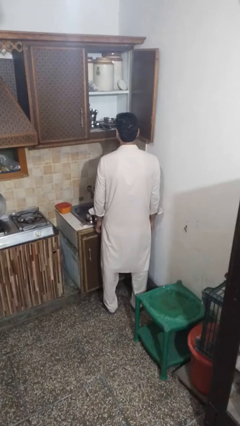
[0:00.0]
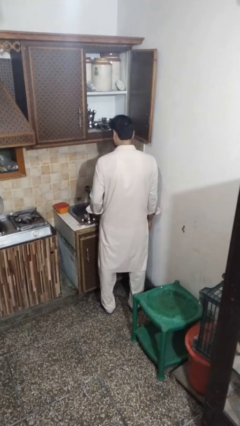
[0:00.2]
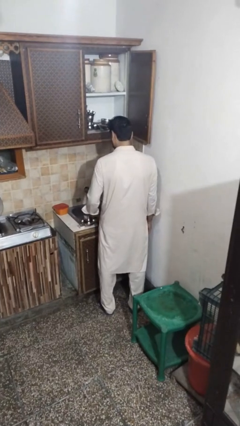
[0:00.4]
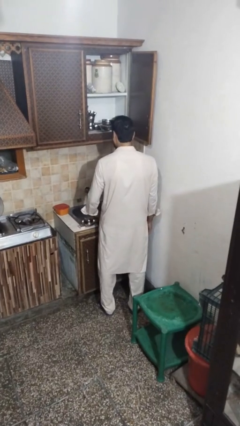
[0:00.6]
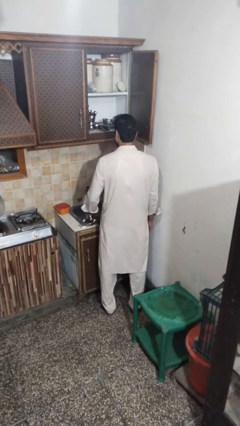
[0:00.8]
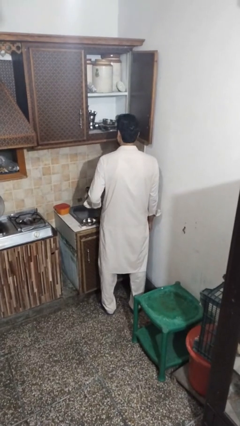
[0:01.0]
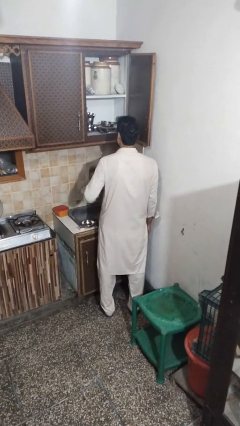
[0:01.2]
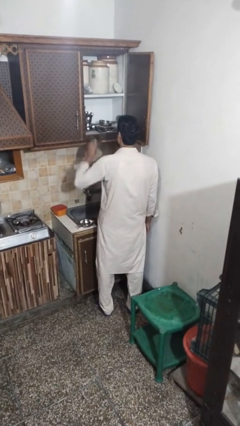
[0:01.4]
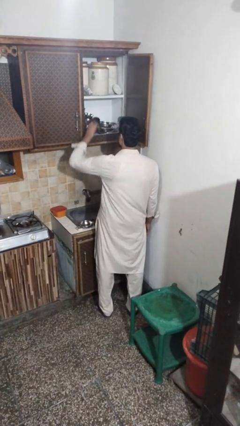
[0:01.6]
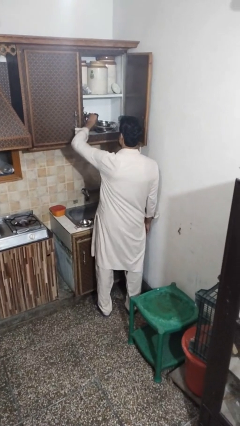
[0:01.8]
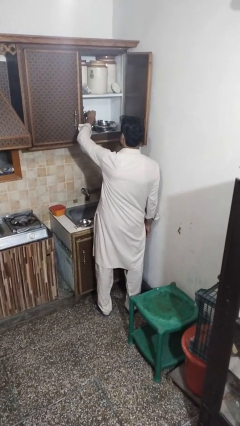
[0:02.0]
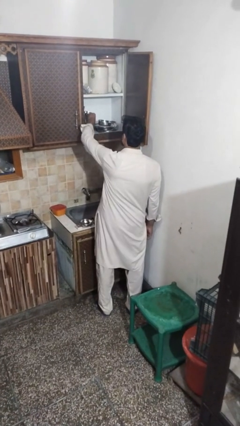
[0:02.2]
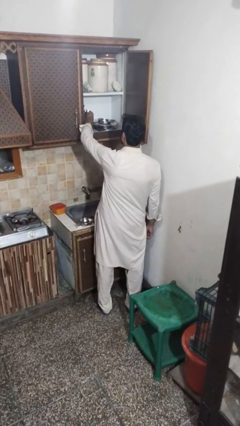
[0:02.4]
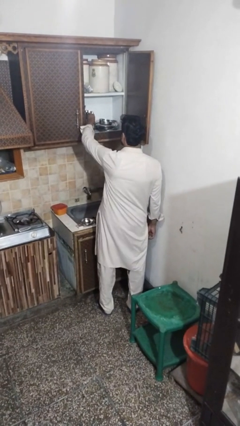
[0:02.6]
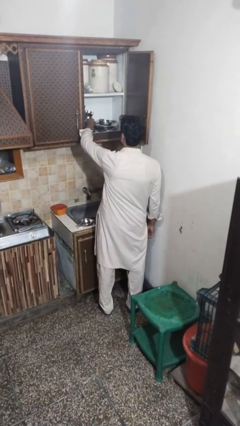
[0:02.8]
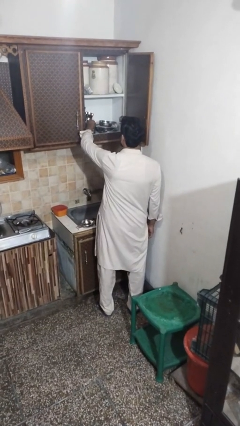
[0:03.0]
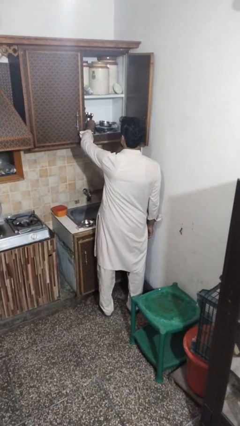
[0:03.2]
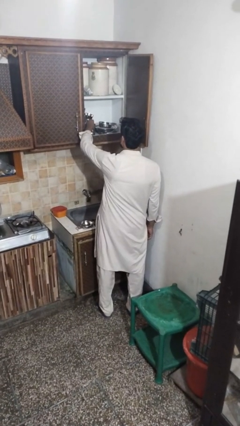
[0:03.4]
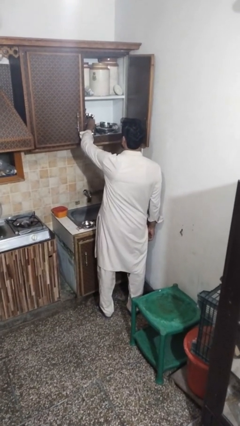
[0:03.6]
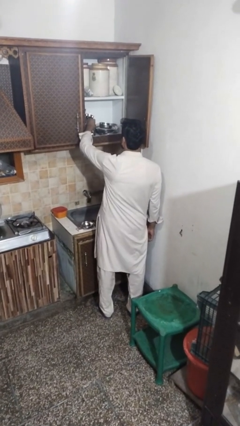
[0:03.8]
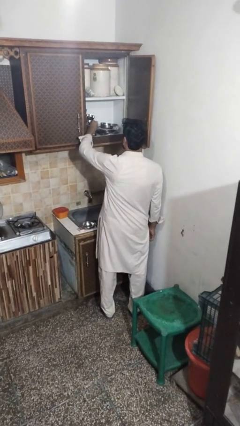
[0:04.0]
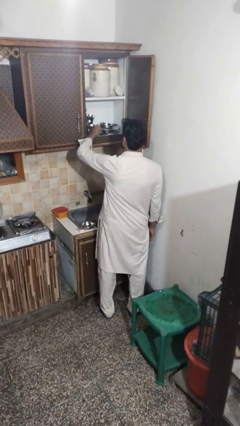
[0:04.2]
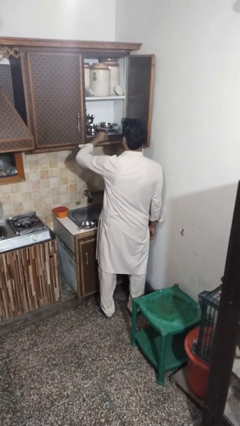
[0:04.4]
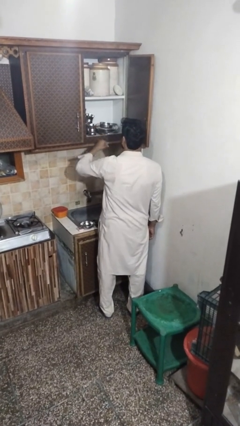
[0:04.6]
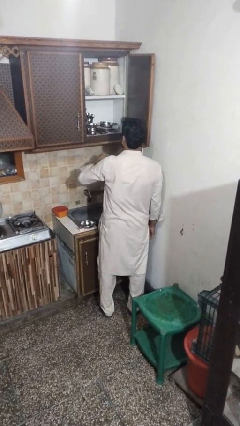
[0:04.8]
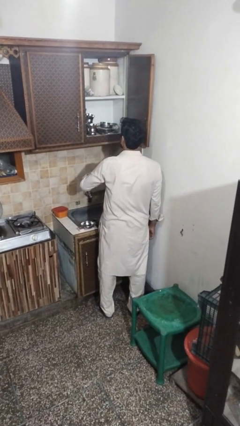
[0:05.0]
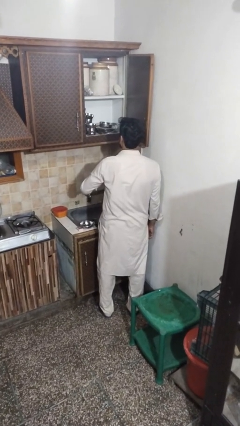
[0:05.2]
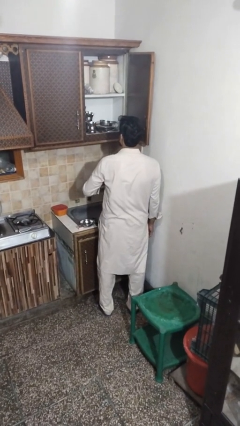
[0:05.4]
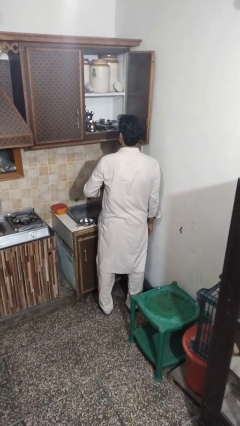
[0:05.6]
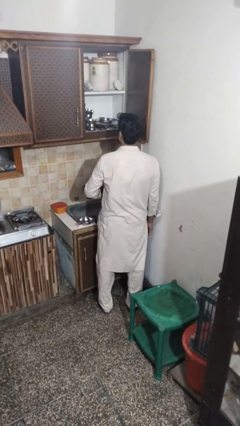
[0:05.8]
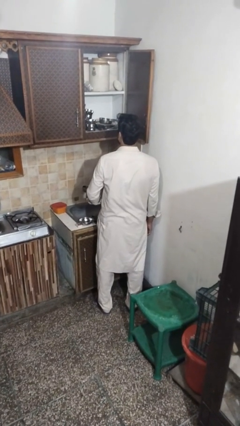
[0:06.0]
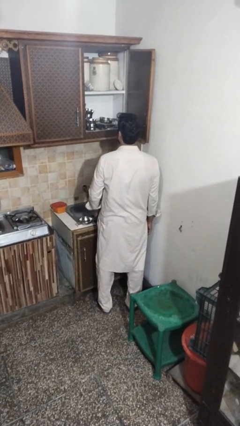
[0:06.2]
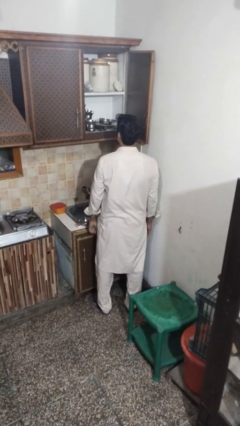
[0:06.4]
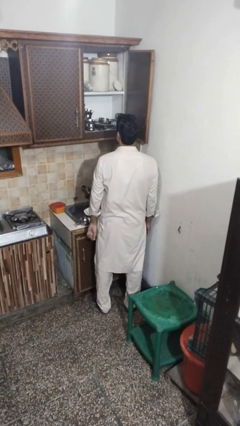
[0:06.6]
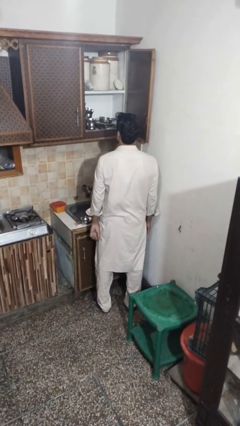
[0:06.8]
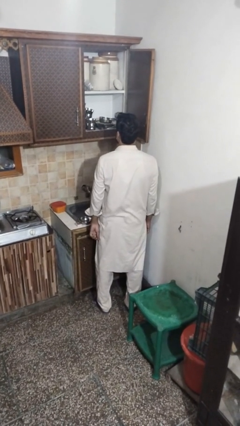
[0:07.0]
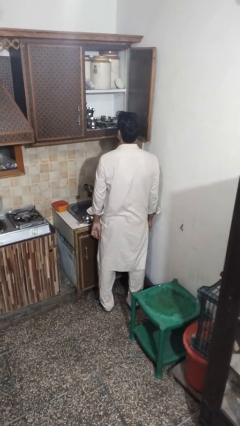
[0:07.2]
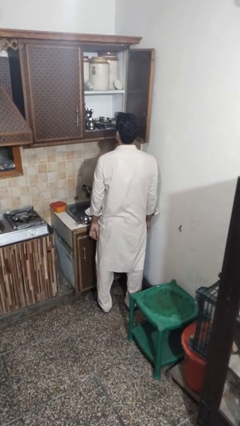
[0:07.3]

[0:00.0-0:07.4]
person puts object in cabinet

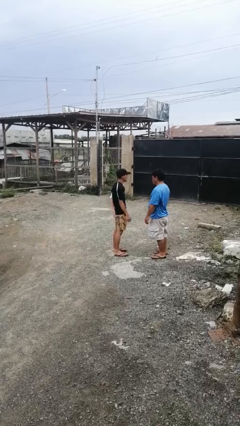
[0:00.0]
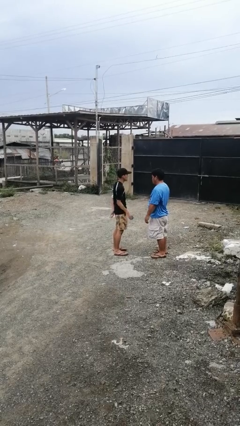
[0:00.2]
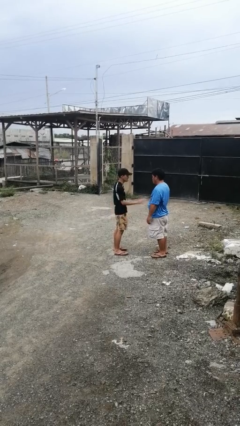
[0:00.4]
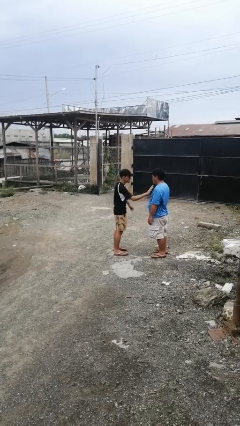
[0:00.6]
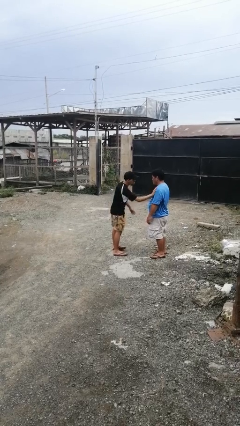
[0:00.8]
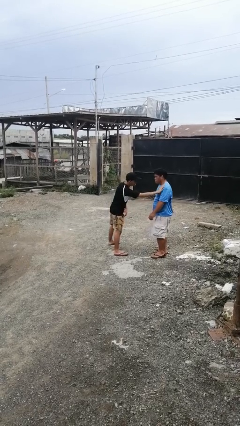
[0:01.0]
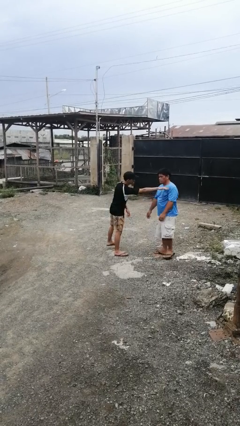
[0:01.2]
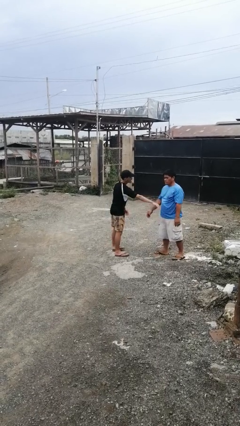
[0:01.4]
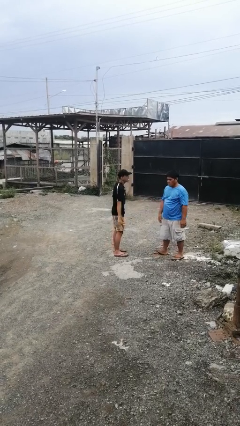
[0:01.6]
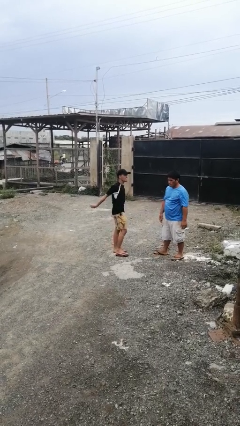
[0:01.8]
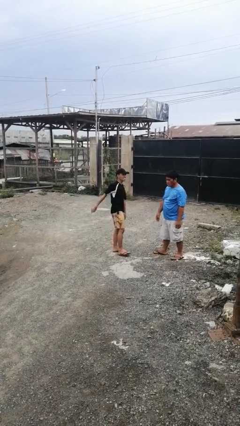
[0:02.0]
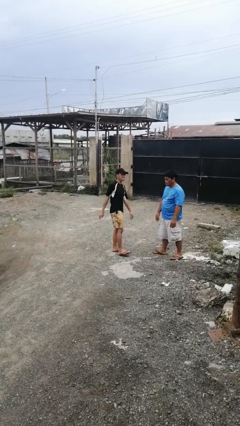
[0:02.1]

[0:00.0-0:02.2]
person shoves person

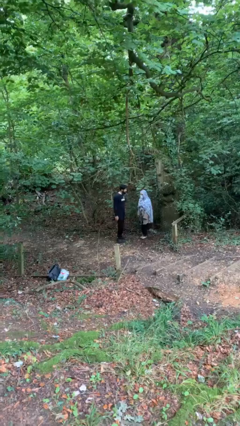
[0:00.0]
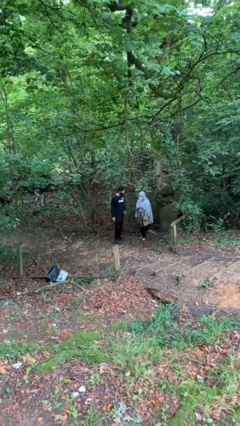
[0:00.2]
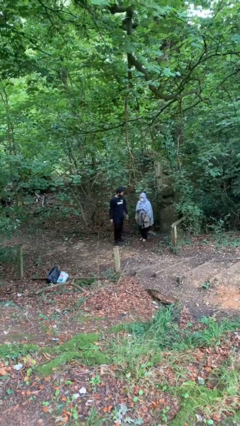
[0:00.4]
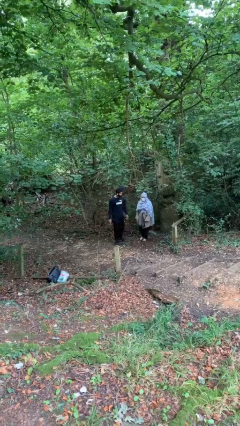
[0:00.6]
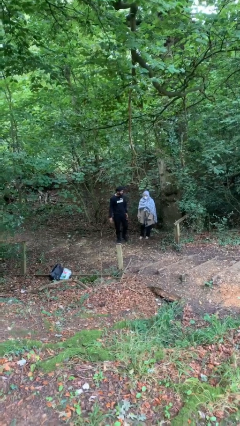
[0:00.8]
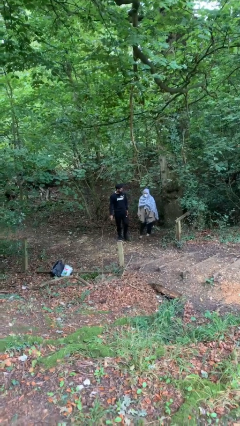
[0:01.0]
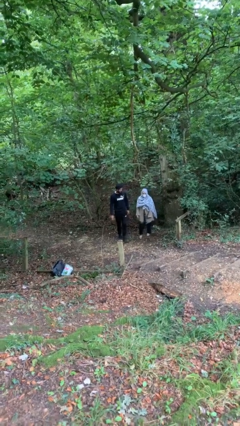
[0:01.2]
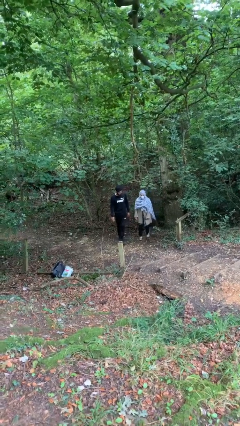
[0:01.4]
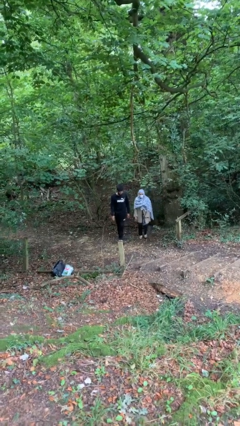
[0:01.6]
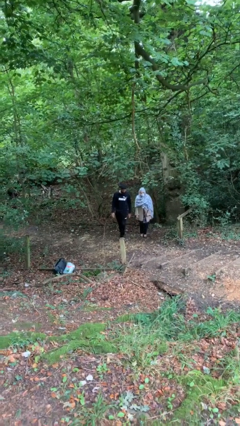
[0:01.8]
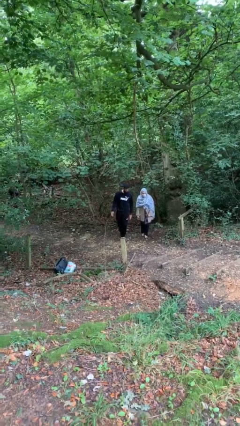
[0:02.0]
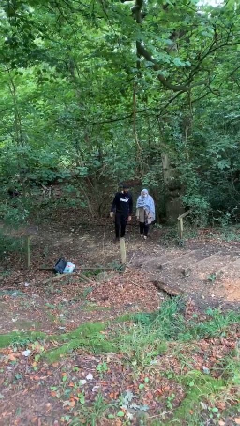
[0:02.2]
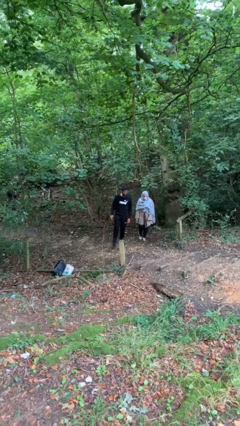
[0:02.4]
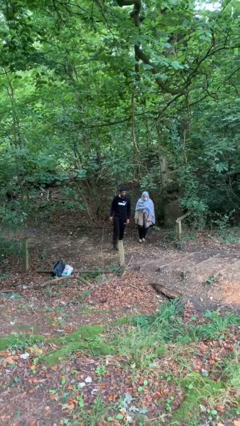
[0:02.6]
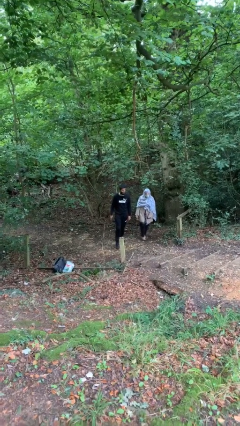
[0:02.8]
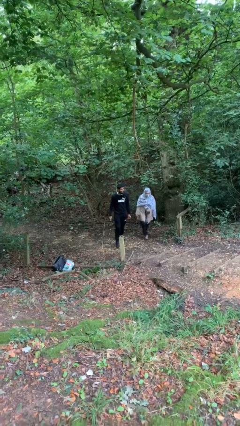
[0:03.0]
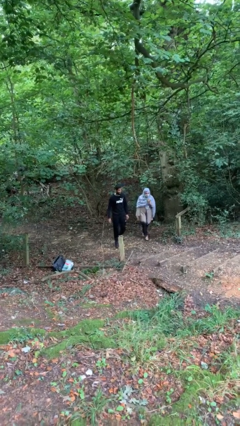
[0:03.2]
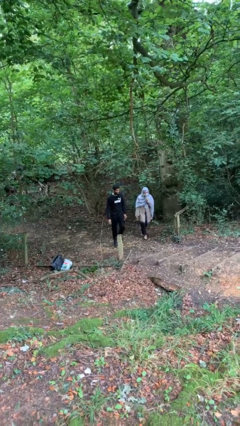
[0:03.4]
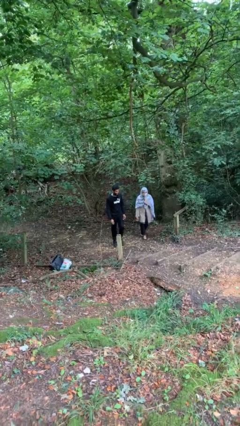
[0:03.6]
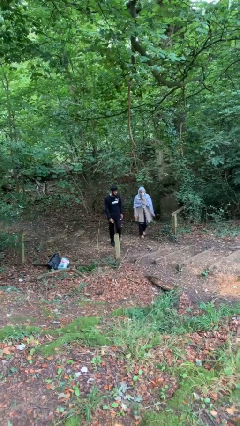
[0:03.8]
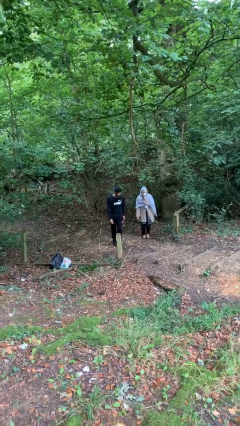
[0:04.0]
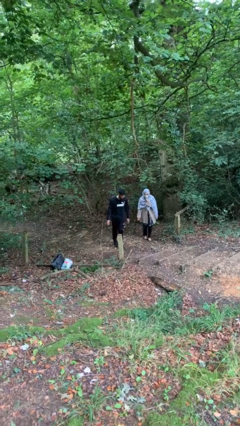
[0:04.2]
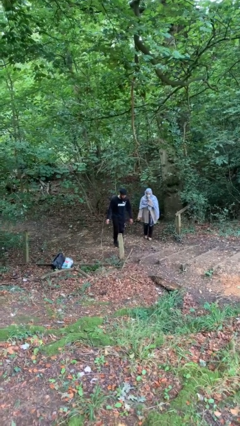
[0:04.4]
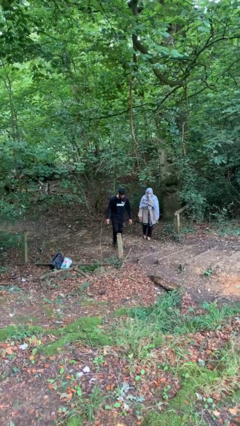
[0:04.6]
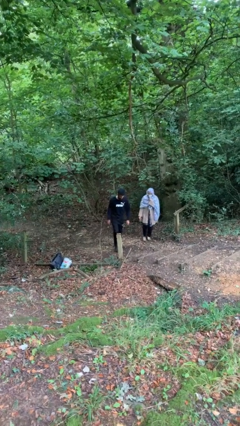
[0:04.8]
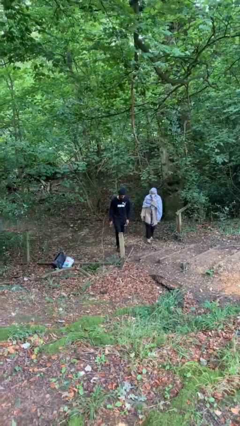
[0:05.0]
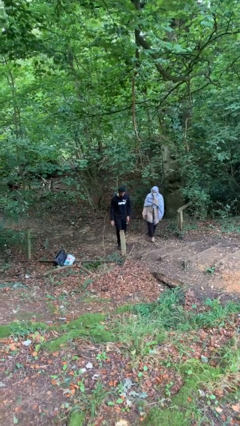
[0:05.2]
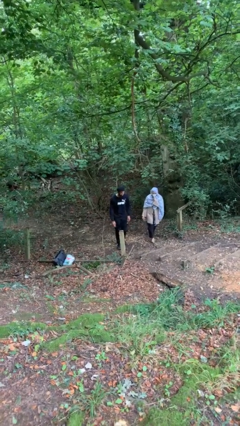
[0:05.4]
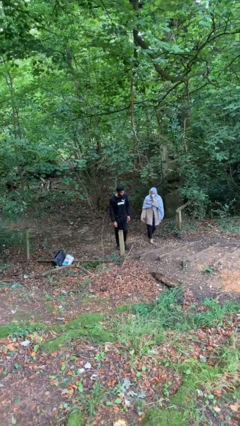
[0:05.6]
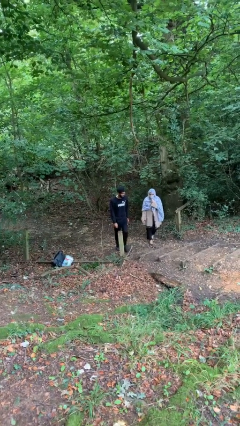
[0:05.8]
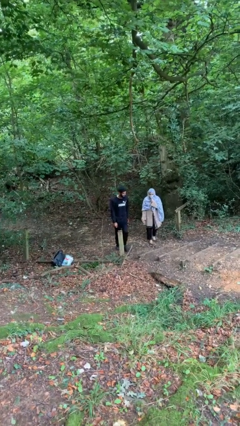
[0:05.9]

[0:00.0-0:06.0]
person talks to person

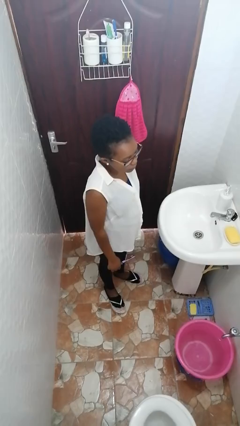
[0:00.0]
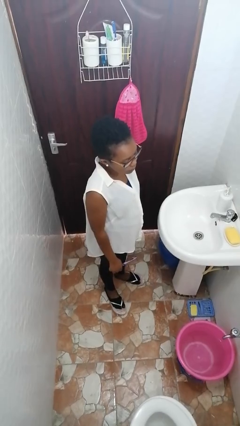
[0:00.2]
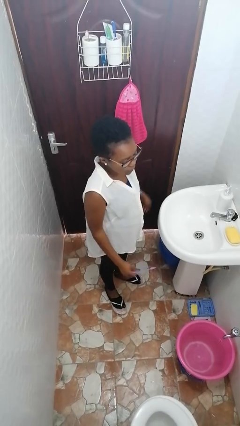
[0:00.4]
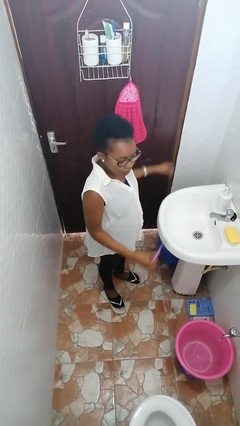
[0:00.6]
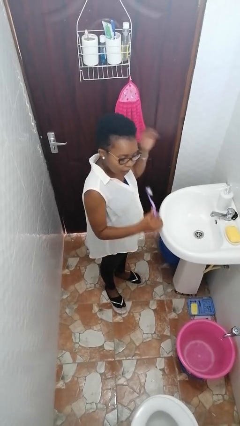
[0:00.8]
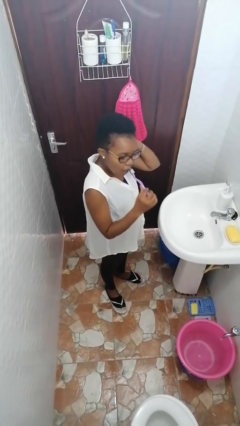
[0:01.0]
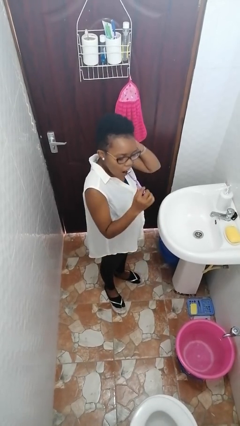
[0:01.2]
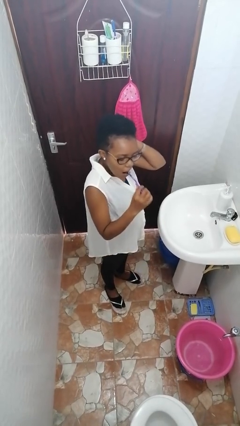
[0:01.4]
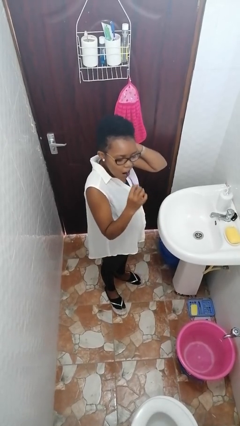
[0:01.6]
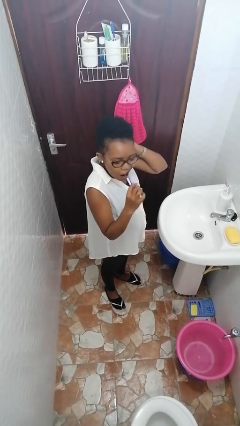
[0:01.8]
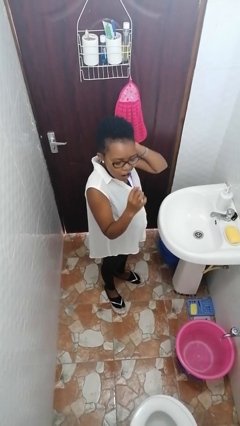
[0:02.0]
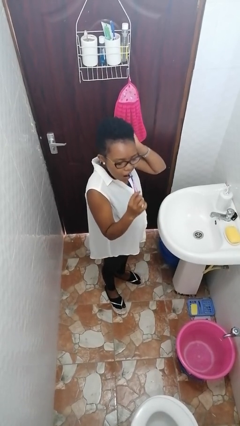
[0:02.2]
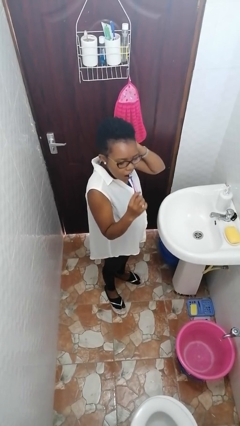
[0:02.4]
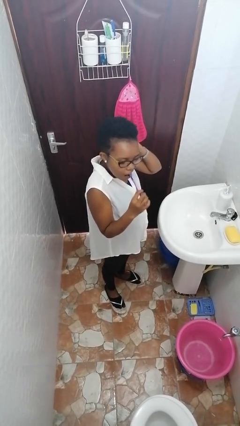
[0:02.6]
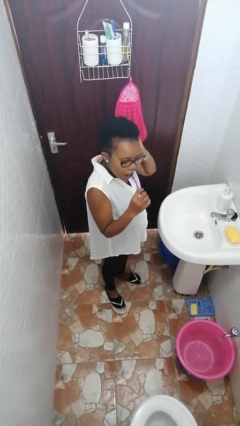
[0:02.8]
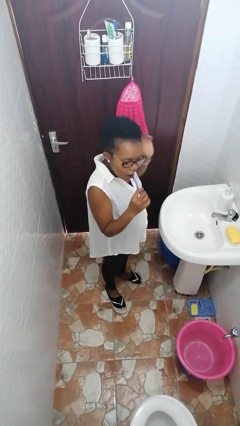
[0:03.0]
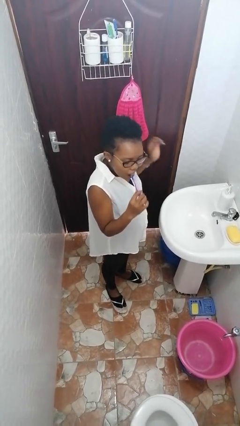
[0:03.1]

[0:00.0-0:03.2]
person brushes teeth
